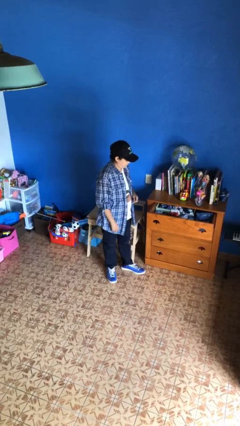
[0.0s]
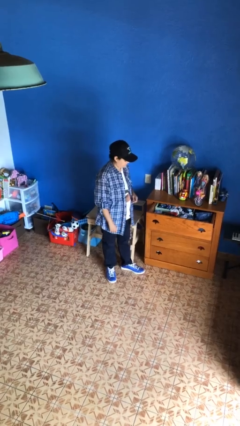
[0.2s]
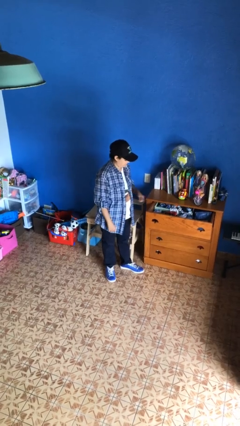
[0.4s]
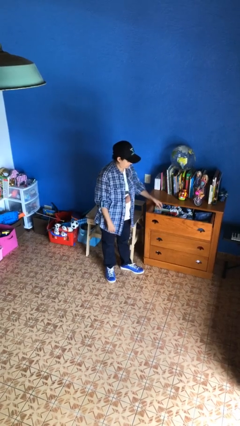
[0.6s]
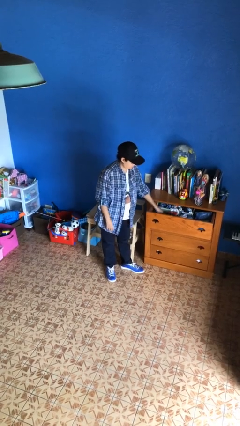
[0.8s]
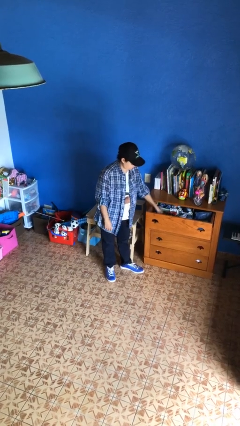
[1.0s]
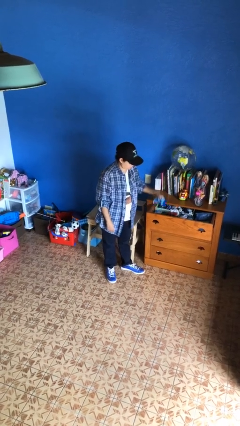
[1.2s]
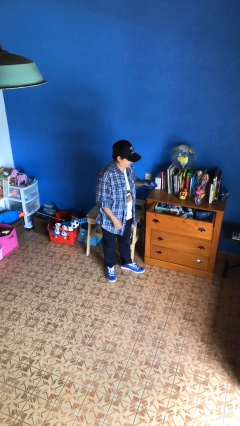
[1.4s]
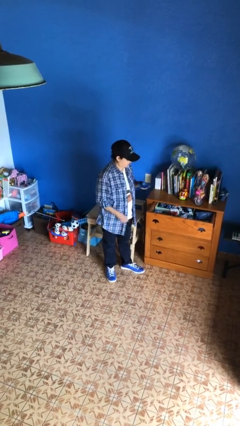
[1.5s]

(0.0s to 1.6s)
person takes clothes from dresser

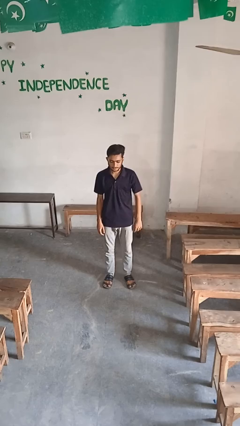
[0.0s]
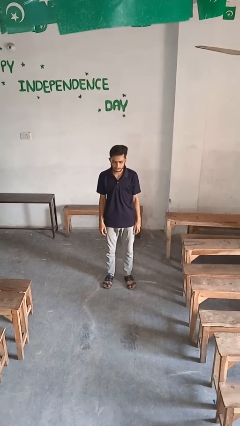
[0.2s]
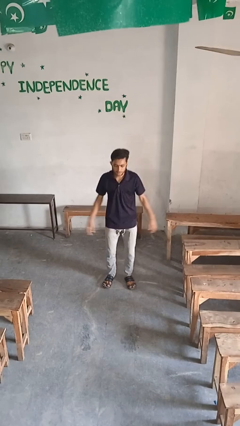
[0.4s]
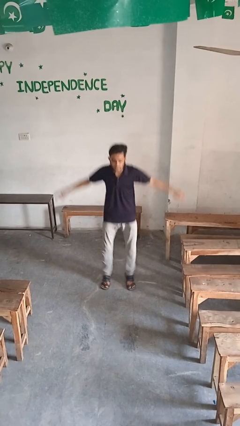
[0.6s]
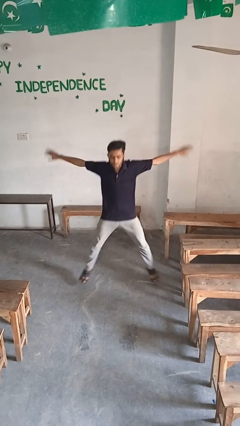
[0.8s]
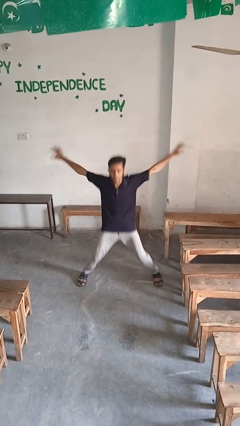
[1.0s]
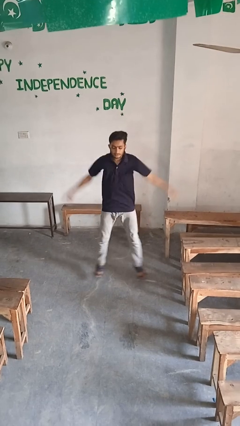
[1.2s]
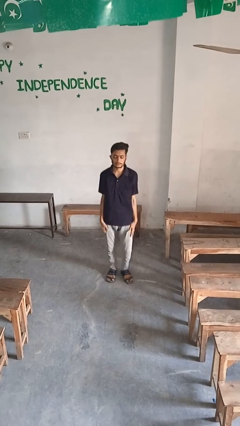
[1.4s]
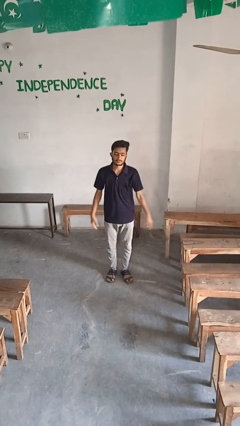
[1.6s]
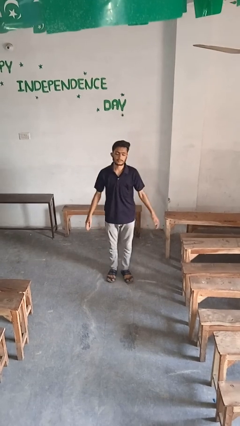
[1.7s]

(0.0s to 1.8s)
person exercises with jumping jacks

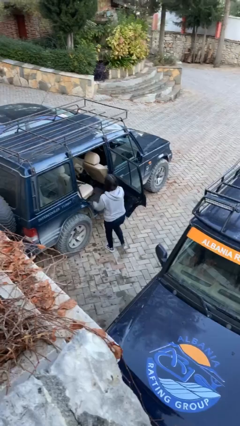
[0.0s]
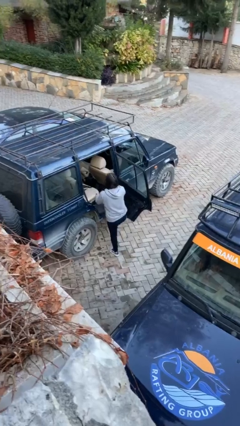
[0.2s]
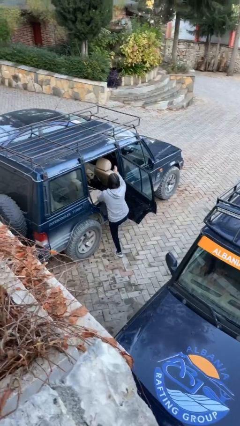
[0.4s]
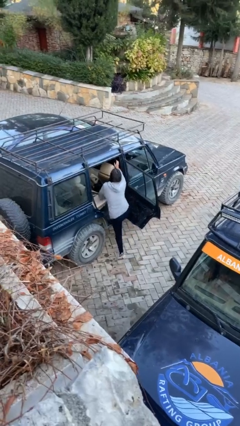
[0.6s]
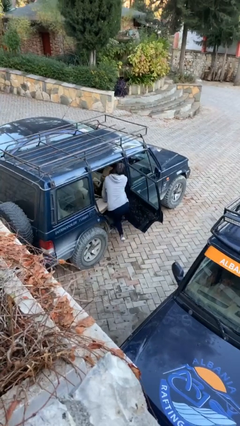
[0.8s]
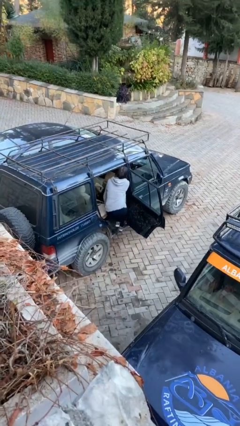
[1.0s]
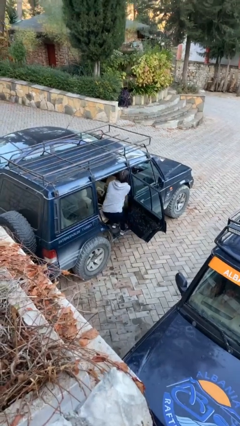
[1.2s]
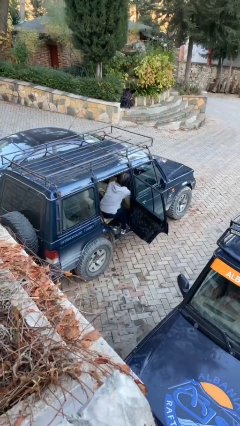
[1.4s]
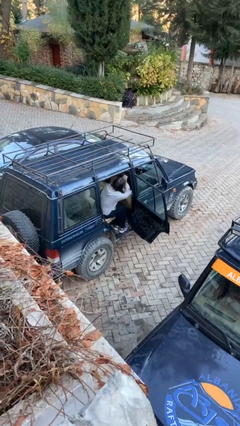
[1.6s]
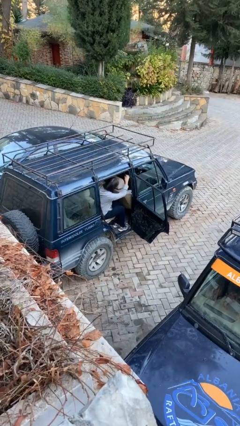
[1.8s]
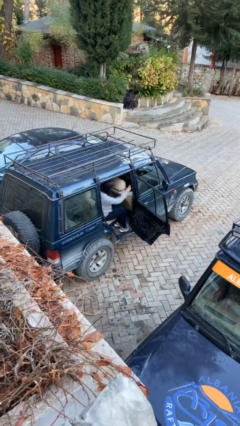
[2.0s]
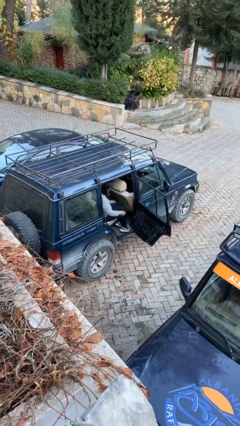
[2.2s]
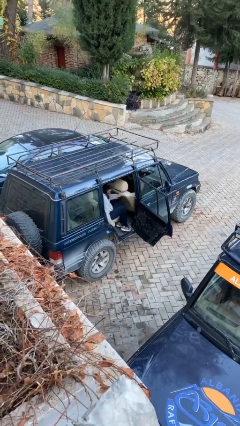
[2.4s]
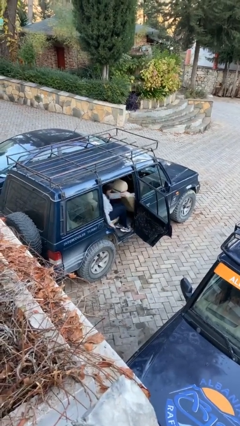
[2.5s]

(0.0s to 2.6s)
person enters car

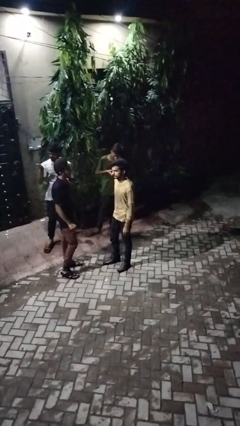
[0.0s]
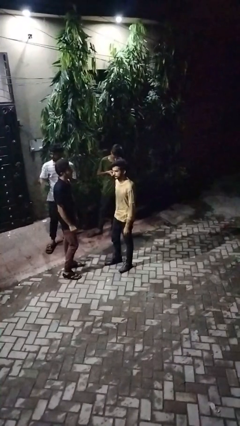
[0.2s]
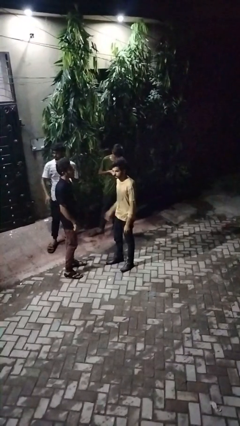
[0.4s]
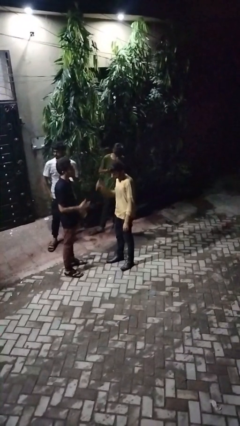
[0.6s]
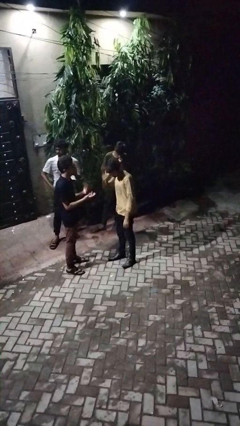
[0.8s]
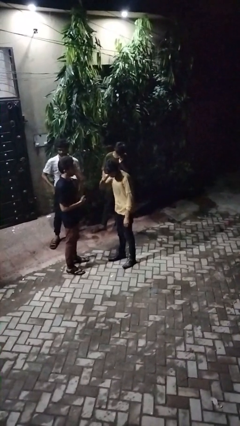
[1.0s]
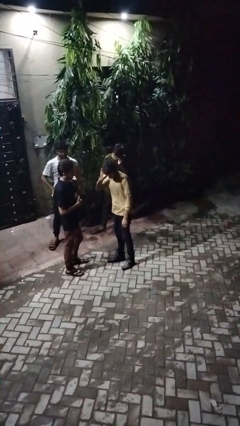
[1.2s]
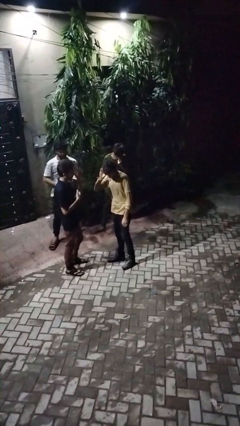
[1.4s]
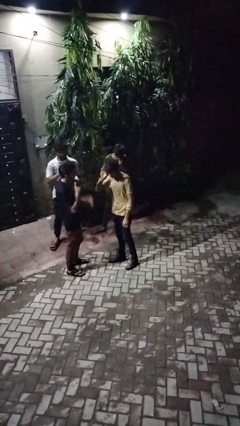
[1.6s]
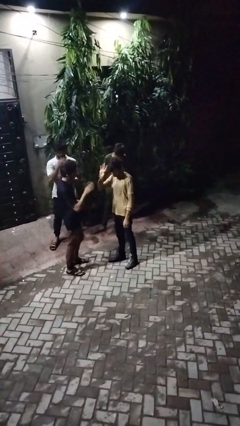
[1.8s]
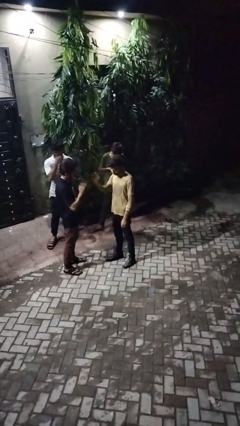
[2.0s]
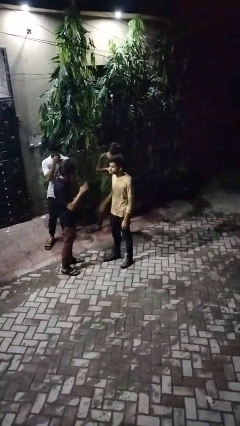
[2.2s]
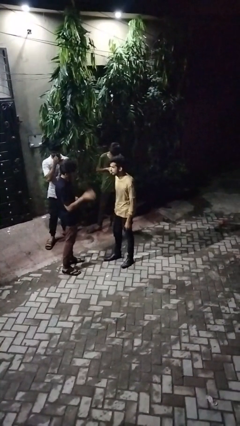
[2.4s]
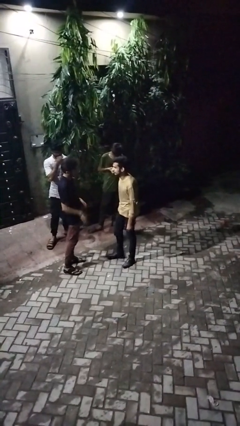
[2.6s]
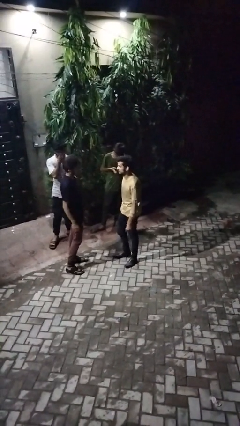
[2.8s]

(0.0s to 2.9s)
person talks to person

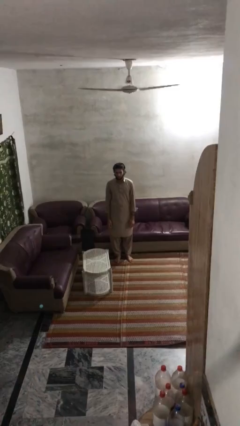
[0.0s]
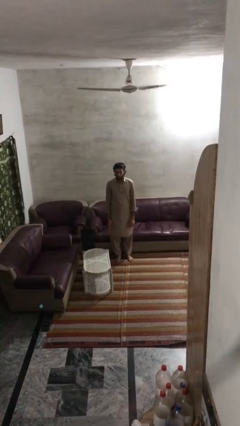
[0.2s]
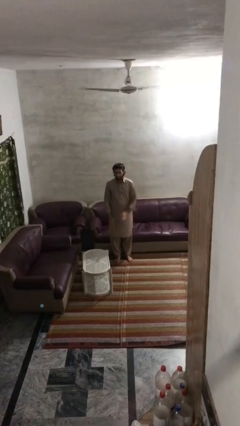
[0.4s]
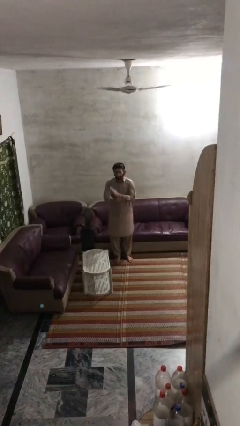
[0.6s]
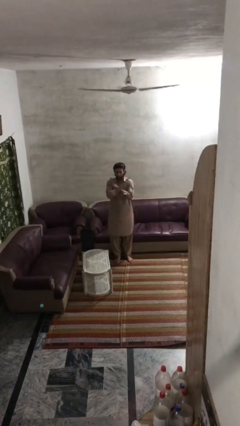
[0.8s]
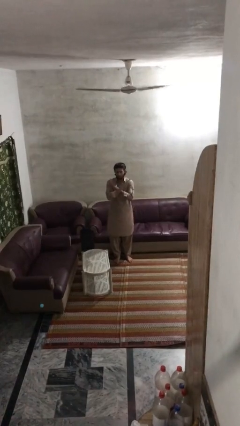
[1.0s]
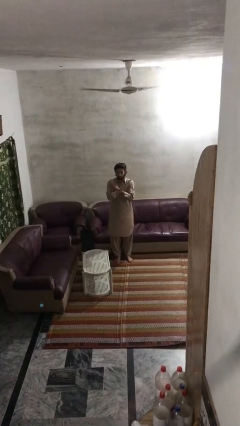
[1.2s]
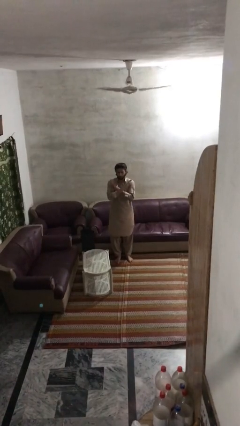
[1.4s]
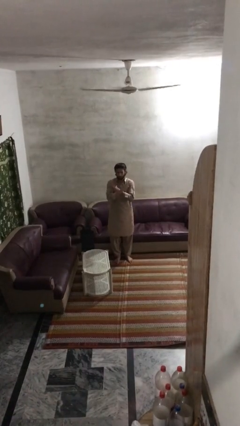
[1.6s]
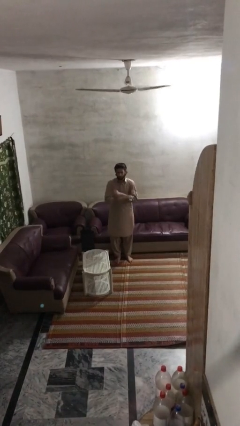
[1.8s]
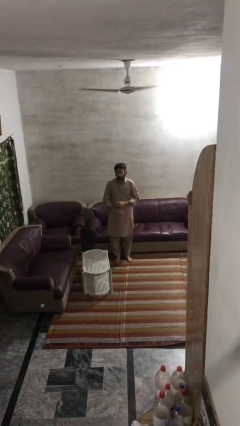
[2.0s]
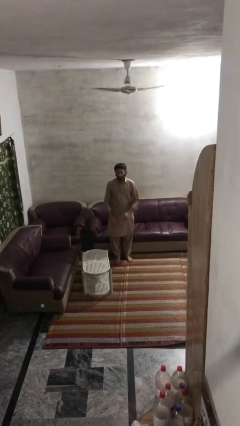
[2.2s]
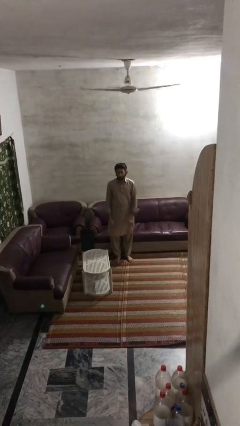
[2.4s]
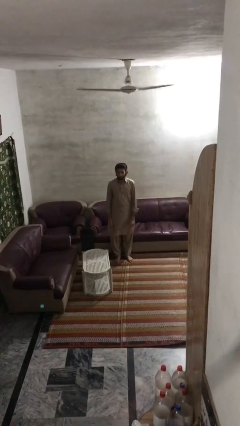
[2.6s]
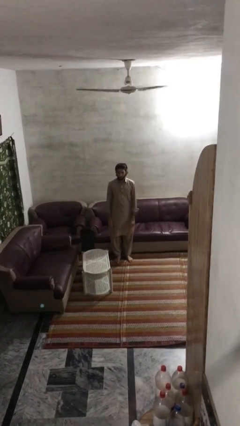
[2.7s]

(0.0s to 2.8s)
person gestures arms x

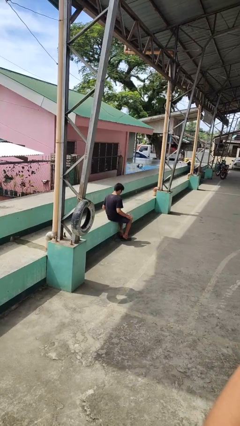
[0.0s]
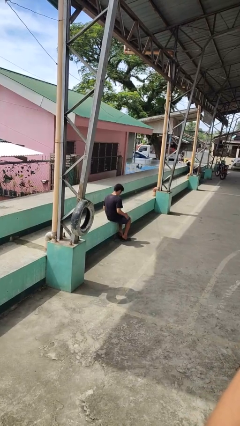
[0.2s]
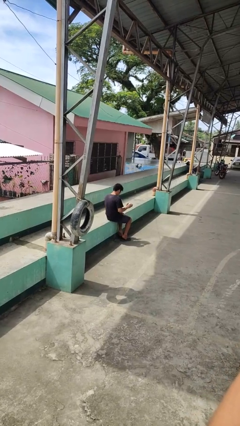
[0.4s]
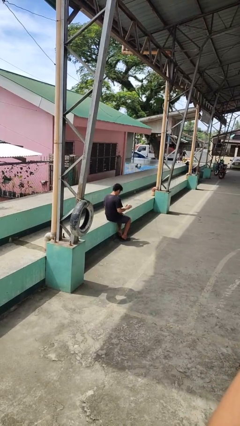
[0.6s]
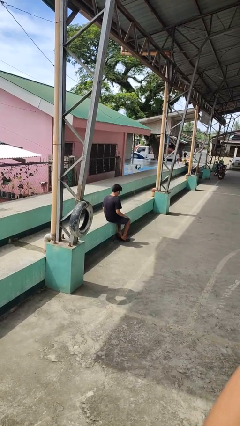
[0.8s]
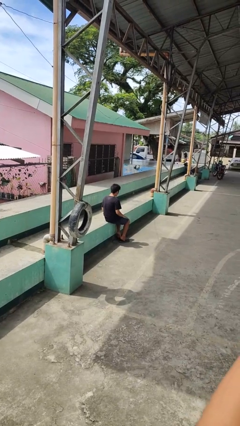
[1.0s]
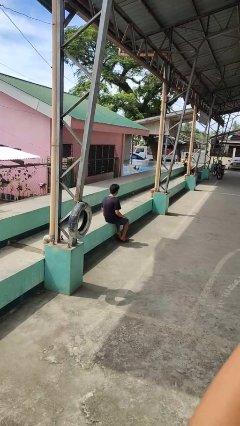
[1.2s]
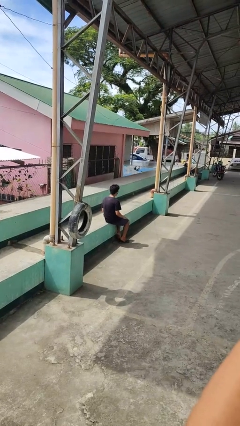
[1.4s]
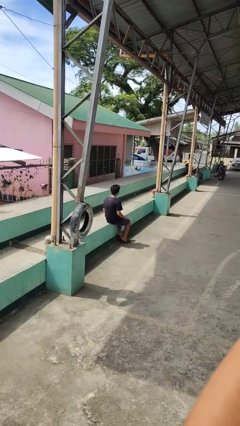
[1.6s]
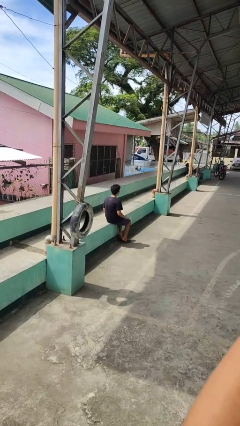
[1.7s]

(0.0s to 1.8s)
person slaps hands on thighs

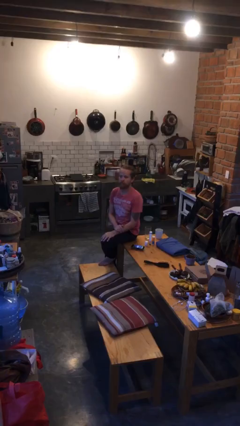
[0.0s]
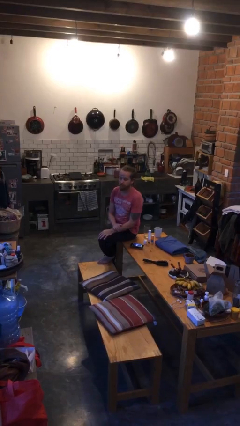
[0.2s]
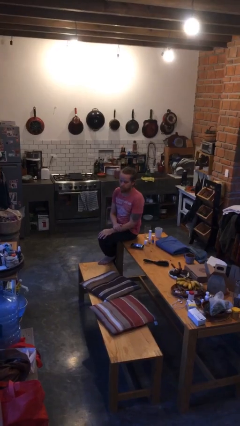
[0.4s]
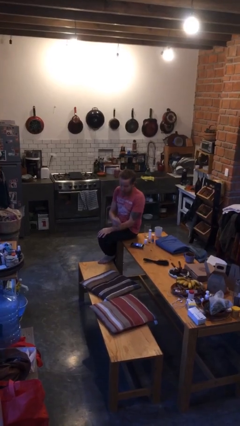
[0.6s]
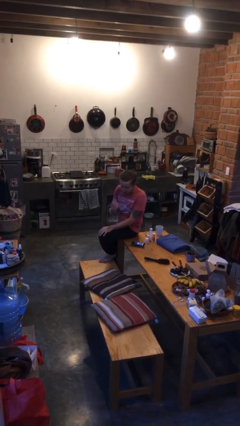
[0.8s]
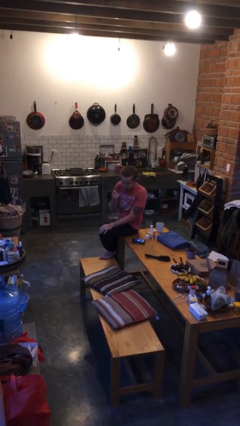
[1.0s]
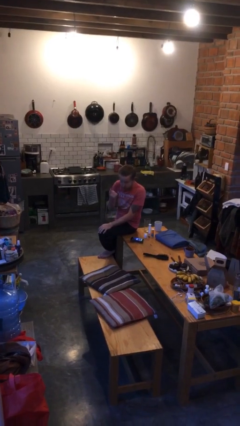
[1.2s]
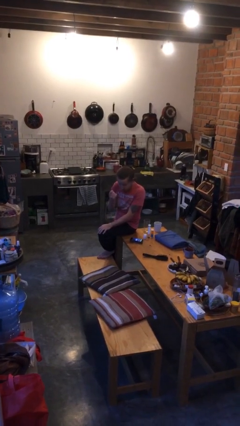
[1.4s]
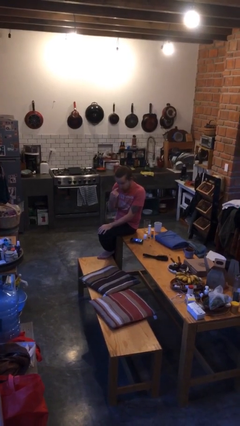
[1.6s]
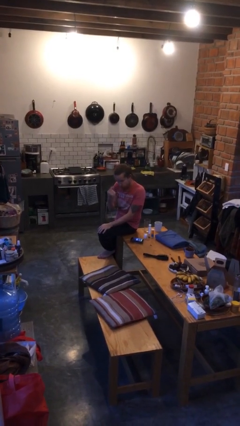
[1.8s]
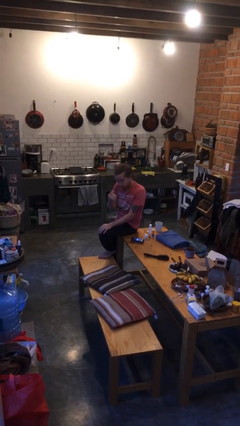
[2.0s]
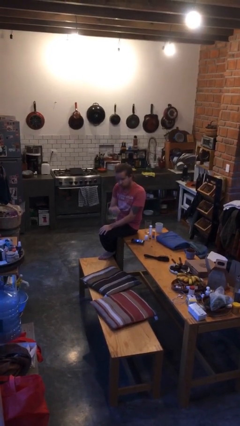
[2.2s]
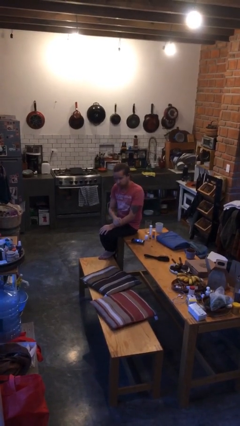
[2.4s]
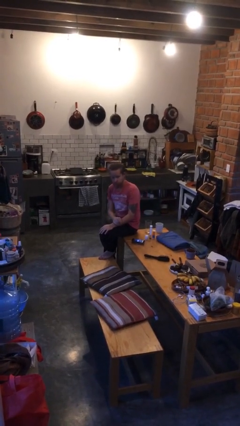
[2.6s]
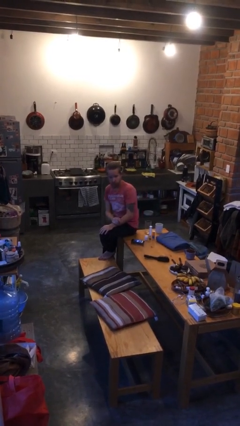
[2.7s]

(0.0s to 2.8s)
person gestures come here

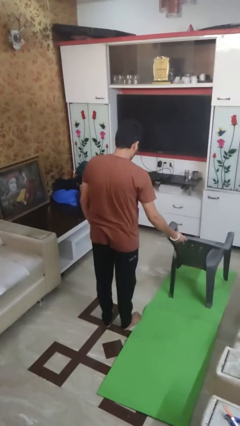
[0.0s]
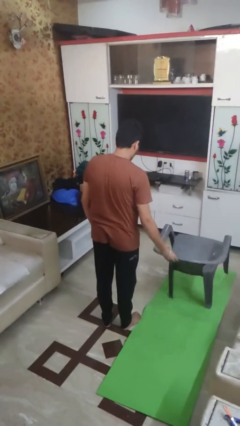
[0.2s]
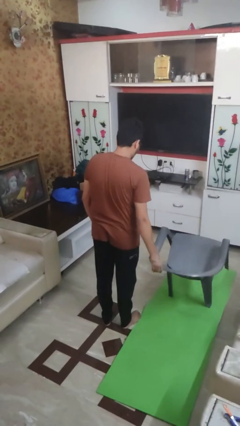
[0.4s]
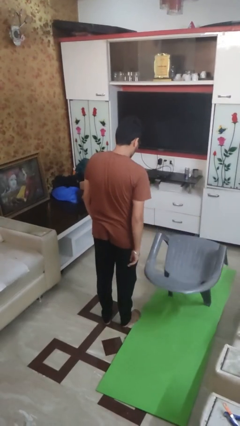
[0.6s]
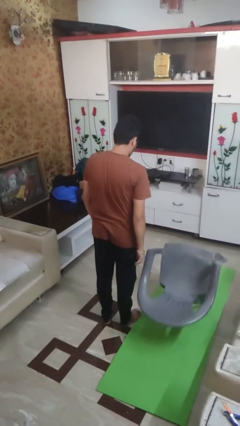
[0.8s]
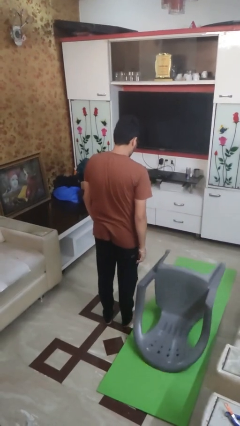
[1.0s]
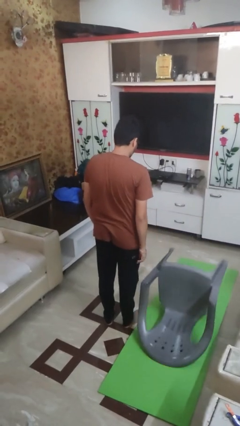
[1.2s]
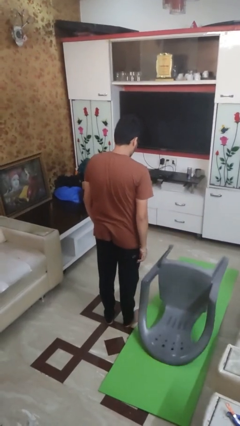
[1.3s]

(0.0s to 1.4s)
person knocks over furniture
